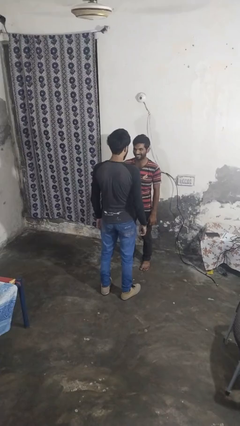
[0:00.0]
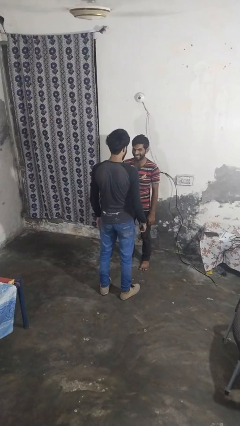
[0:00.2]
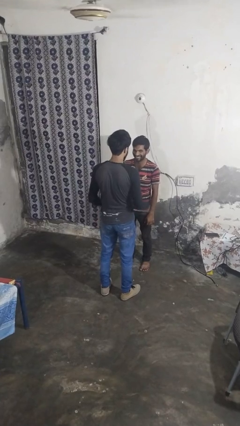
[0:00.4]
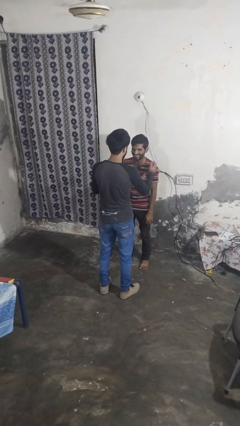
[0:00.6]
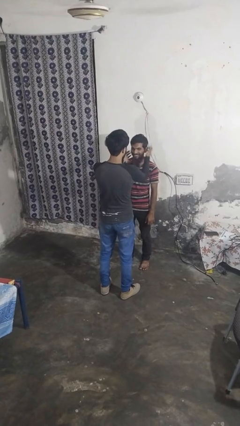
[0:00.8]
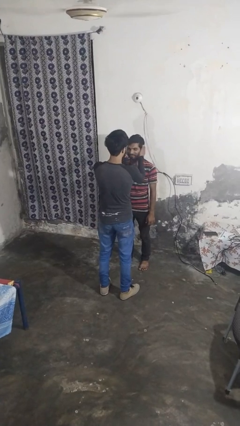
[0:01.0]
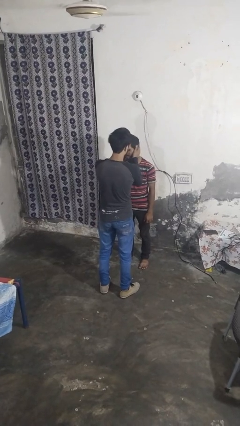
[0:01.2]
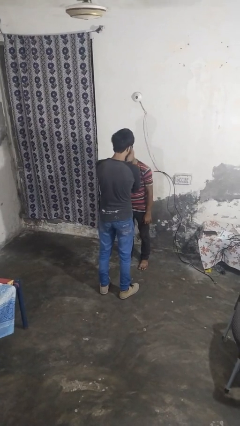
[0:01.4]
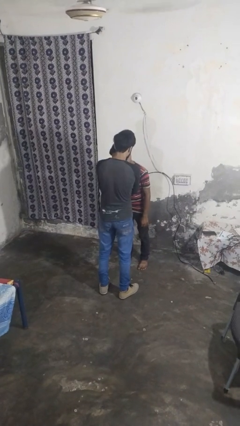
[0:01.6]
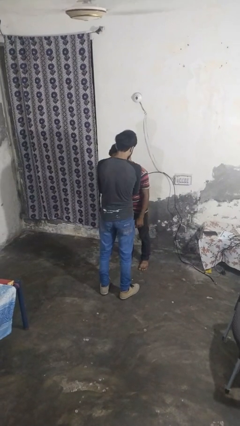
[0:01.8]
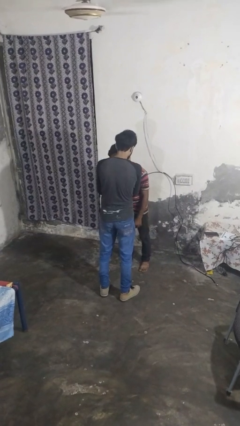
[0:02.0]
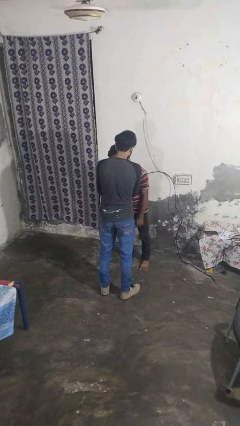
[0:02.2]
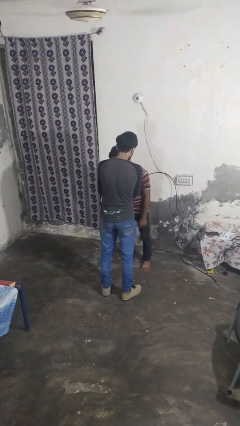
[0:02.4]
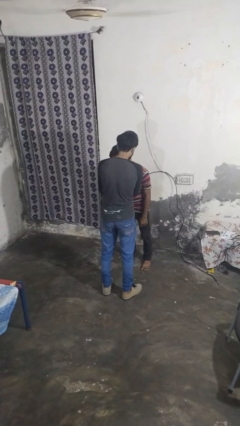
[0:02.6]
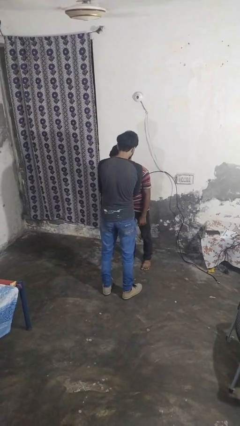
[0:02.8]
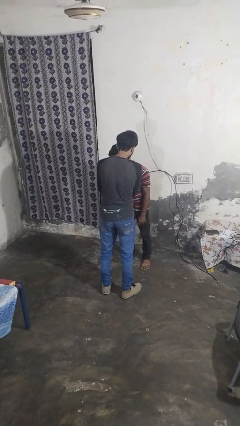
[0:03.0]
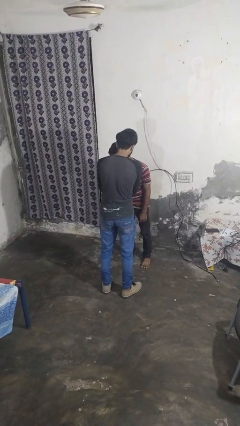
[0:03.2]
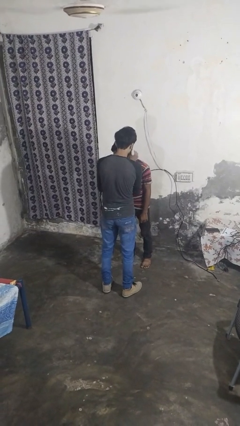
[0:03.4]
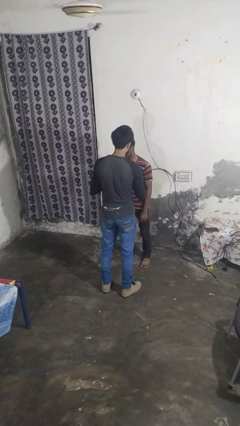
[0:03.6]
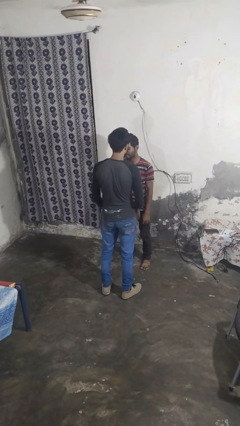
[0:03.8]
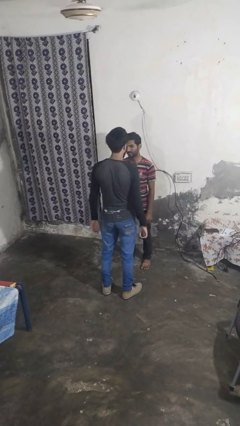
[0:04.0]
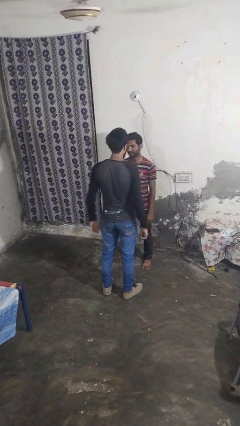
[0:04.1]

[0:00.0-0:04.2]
person kisses cheek of person

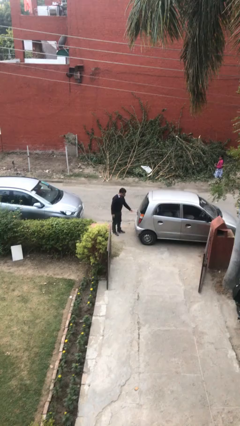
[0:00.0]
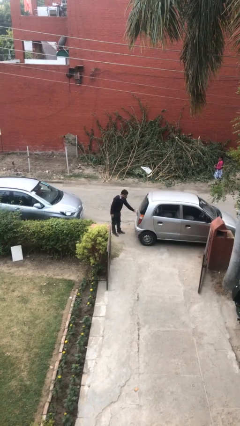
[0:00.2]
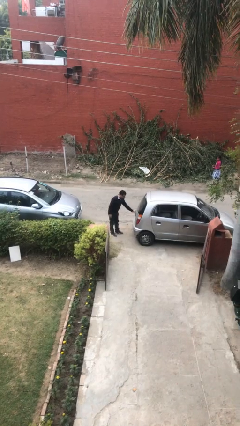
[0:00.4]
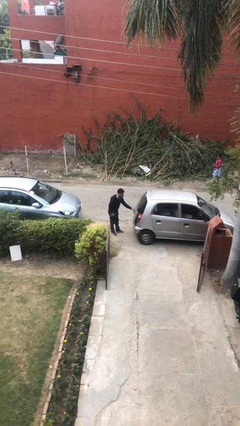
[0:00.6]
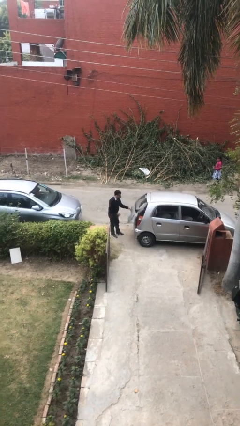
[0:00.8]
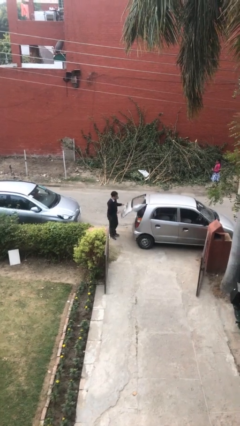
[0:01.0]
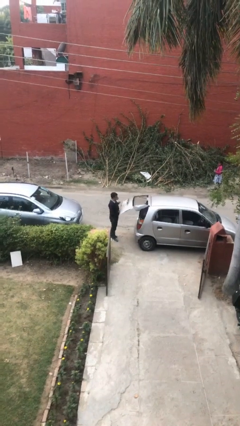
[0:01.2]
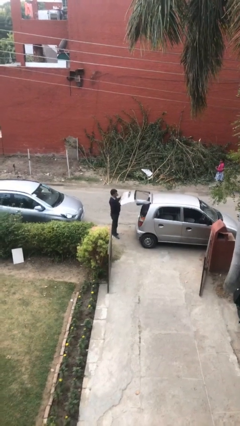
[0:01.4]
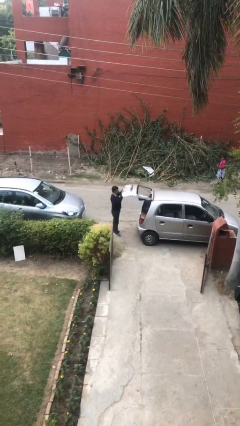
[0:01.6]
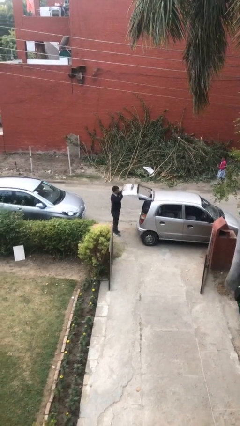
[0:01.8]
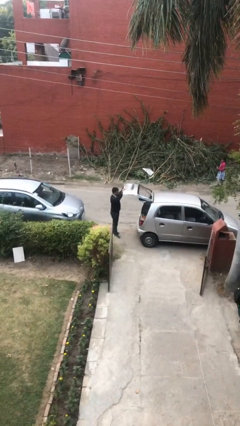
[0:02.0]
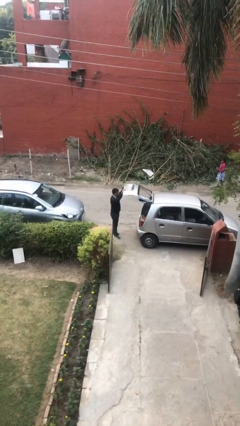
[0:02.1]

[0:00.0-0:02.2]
person opens car trunk

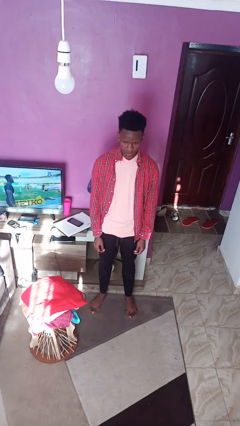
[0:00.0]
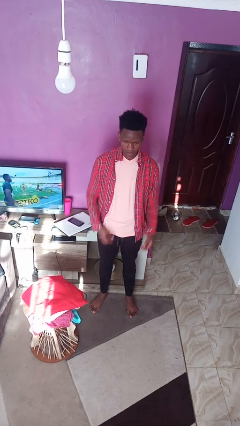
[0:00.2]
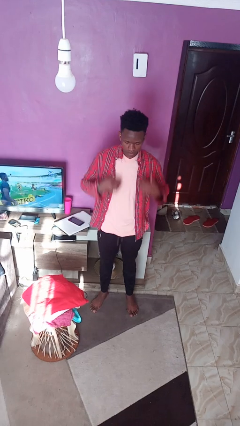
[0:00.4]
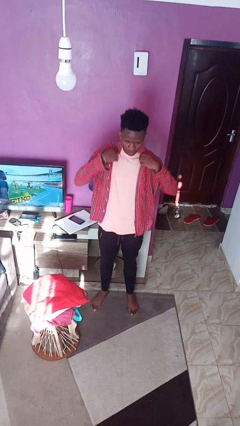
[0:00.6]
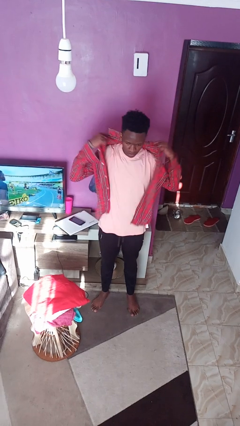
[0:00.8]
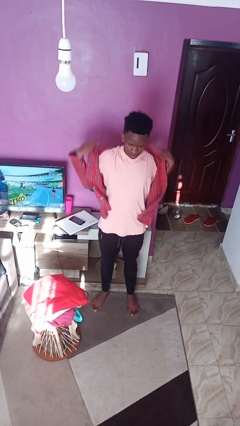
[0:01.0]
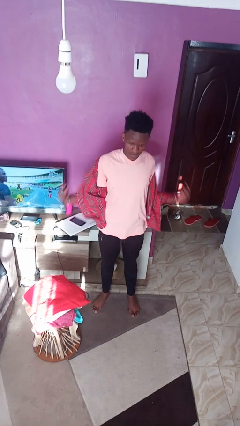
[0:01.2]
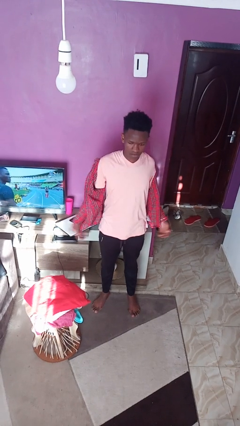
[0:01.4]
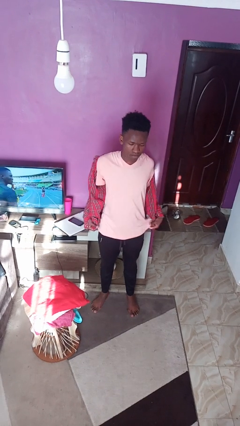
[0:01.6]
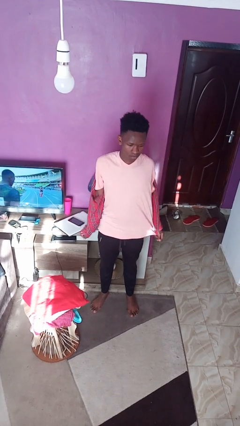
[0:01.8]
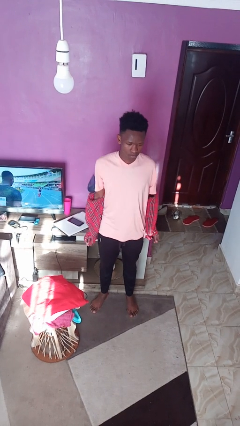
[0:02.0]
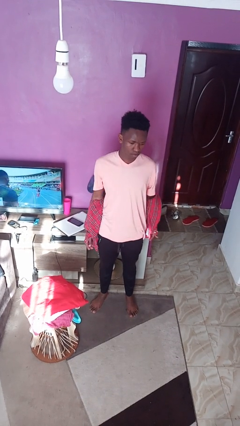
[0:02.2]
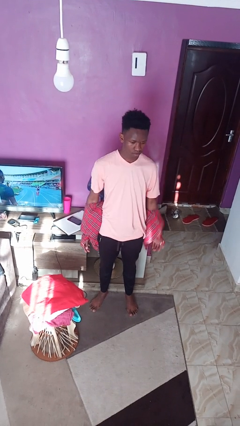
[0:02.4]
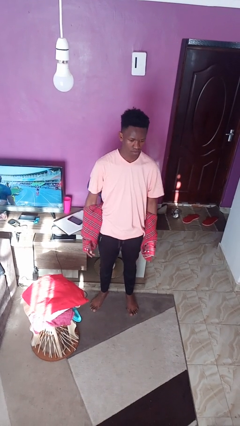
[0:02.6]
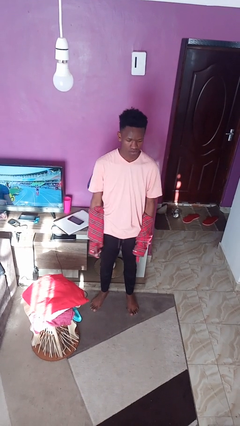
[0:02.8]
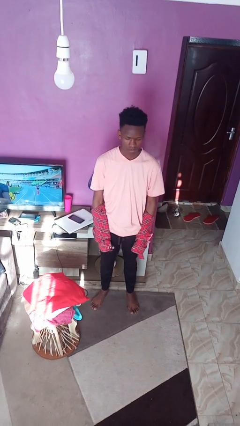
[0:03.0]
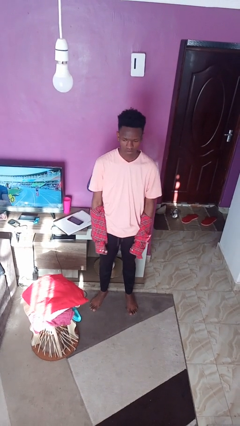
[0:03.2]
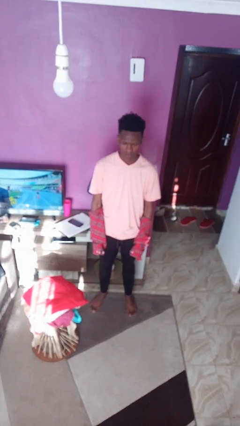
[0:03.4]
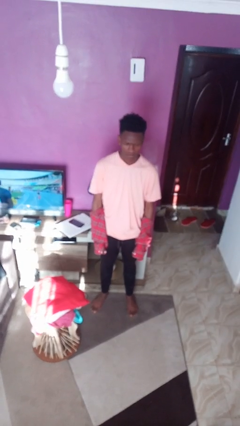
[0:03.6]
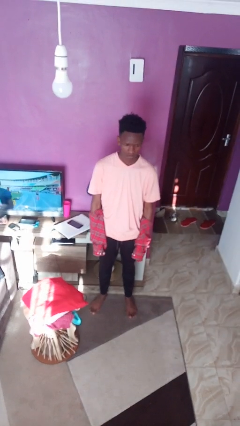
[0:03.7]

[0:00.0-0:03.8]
person takes off shirt

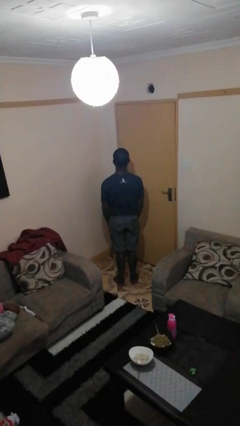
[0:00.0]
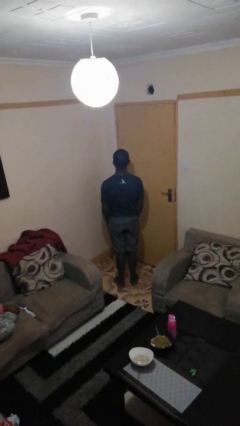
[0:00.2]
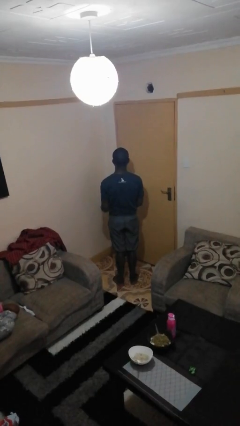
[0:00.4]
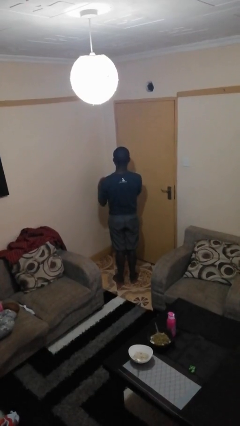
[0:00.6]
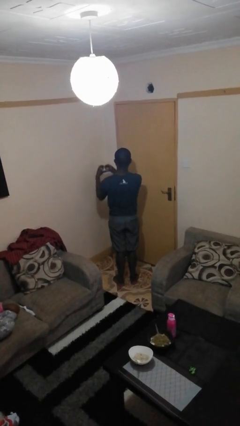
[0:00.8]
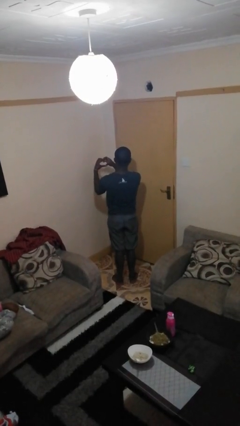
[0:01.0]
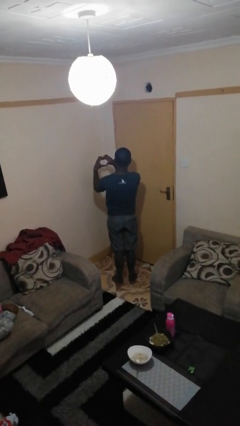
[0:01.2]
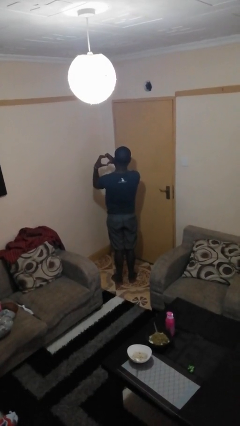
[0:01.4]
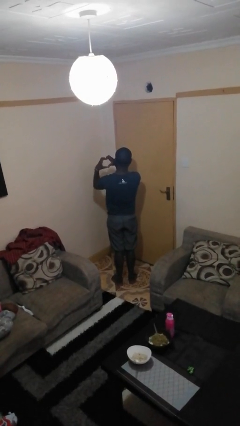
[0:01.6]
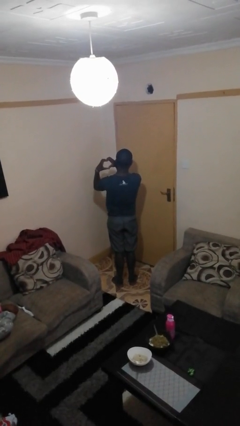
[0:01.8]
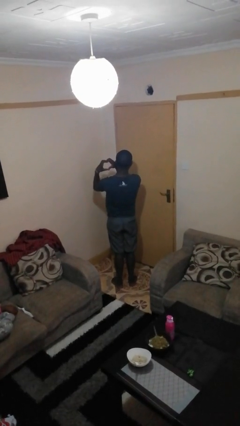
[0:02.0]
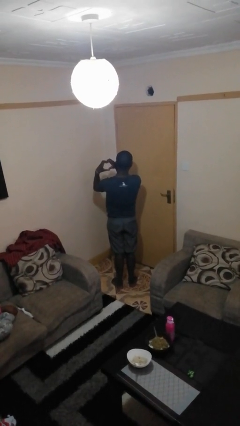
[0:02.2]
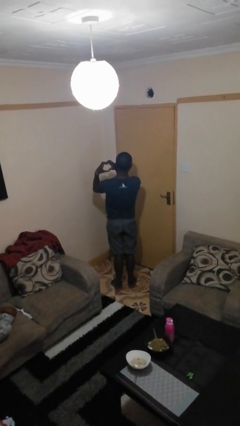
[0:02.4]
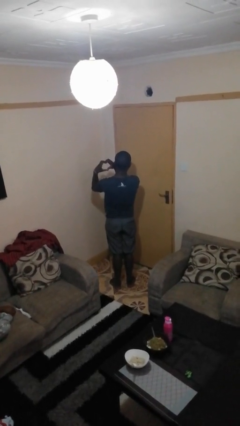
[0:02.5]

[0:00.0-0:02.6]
person gestures heart

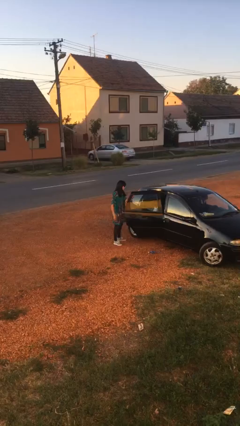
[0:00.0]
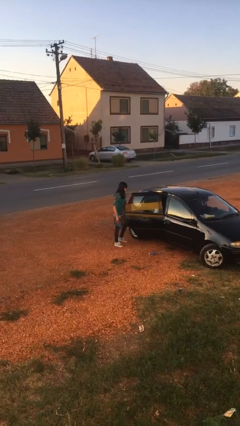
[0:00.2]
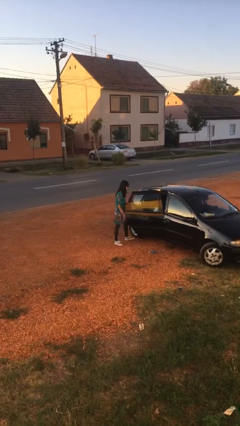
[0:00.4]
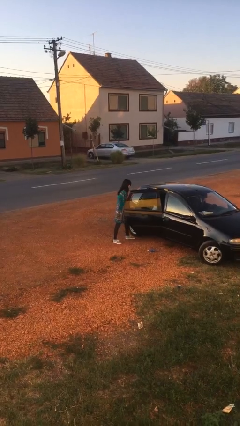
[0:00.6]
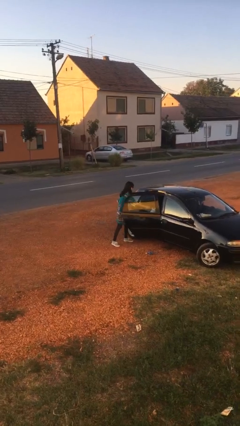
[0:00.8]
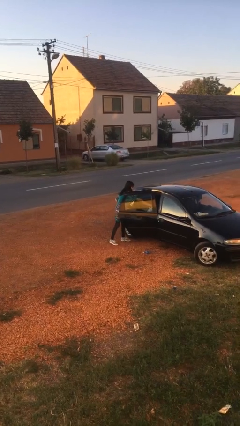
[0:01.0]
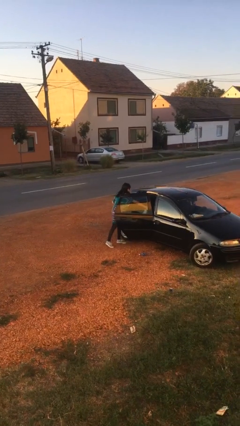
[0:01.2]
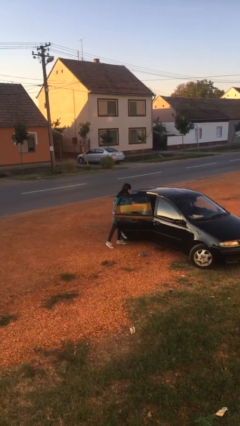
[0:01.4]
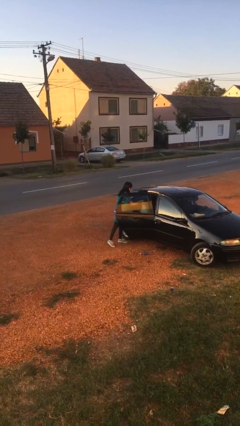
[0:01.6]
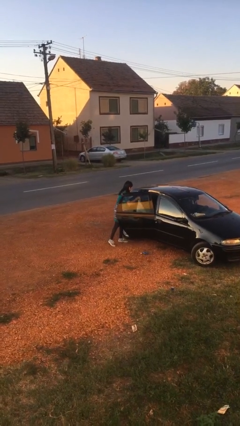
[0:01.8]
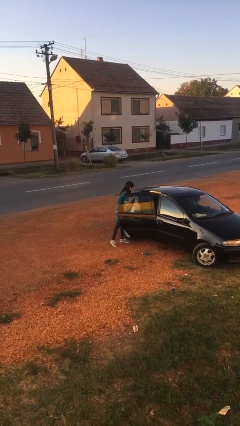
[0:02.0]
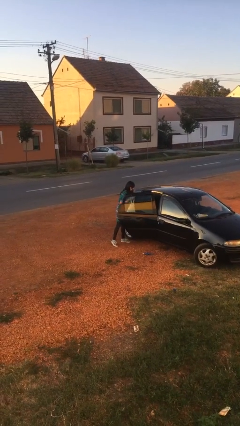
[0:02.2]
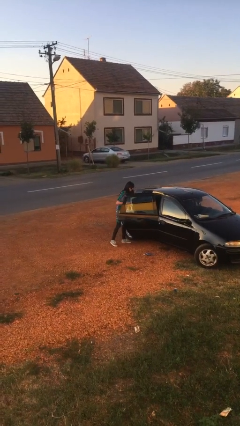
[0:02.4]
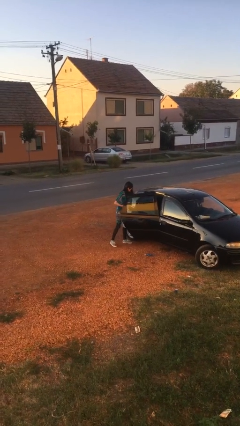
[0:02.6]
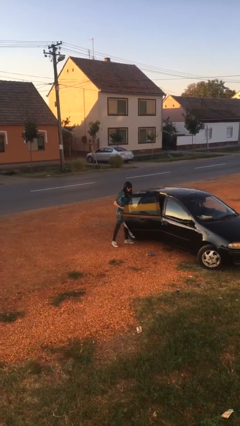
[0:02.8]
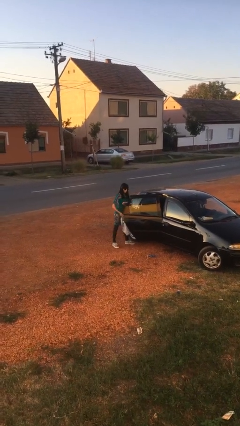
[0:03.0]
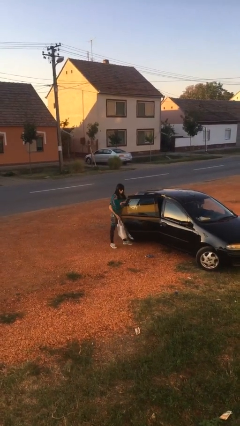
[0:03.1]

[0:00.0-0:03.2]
person unloads car

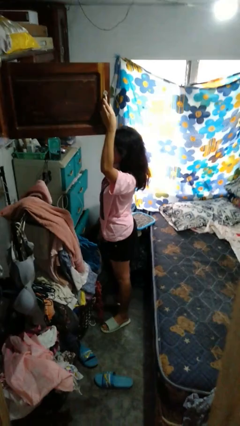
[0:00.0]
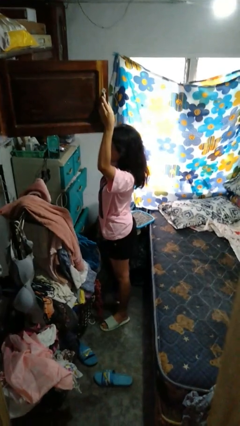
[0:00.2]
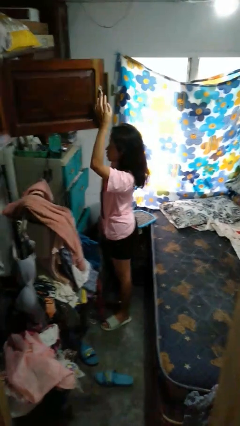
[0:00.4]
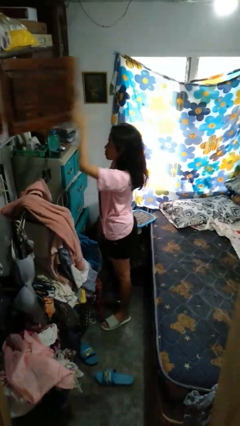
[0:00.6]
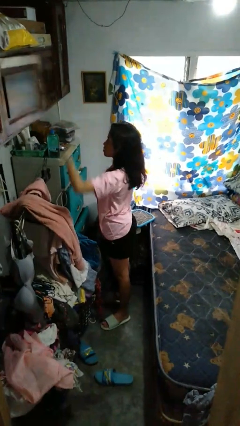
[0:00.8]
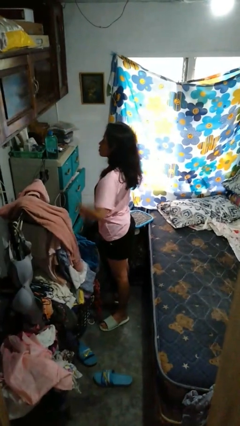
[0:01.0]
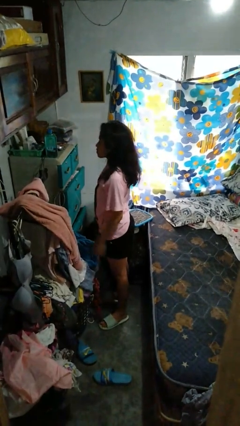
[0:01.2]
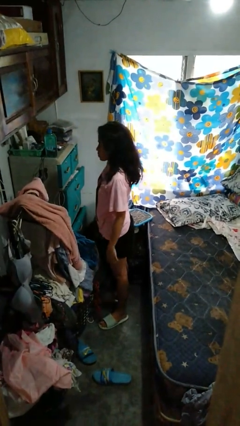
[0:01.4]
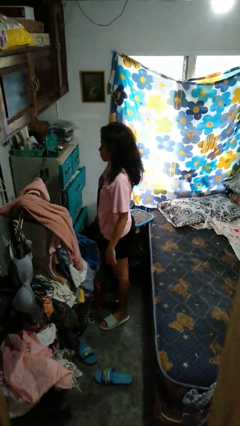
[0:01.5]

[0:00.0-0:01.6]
person closes closet door
